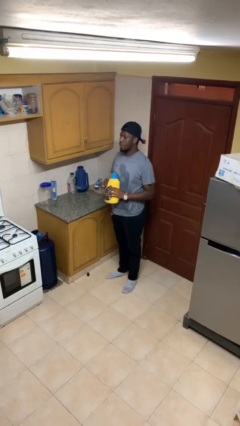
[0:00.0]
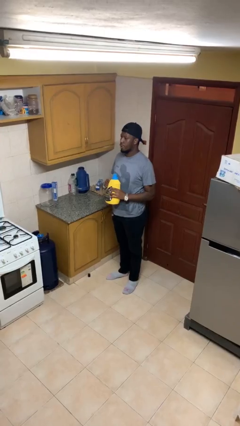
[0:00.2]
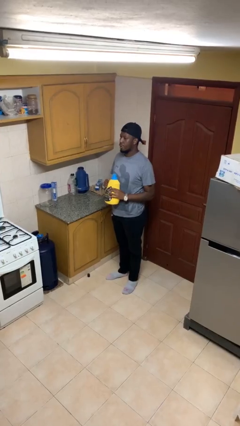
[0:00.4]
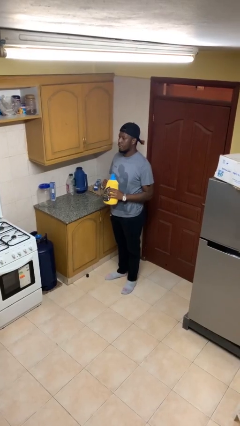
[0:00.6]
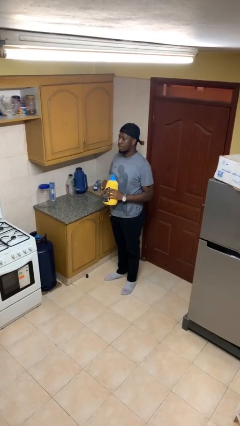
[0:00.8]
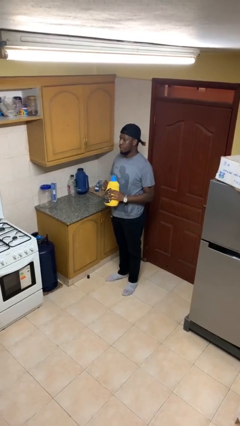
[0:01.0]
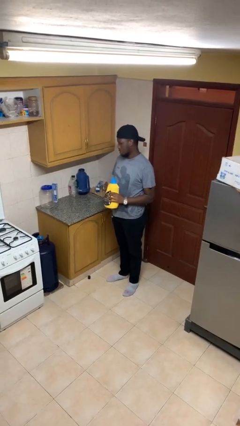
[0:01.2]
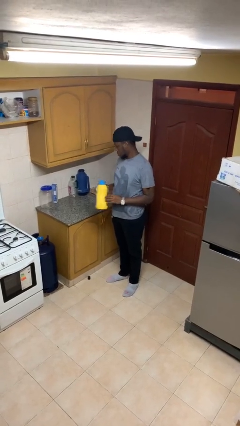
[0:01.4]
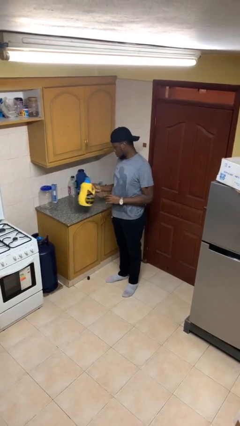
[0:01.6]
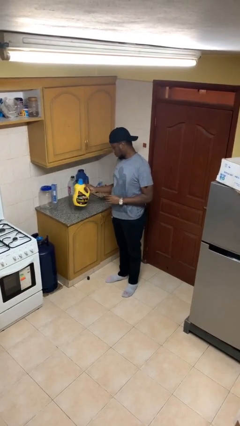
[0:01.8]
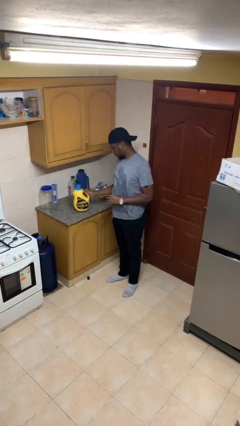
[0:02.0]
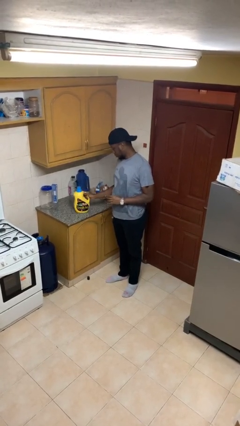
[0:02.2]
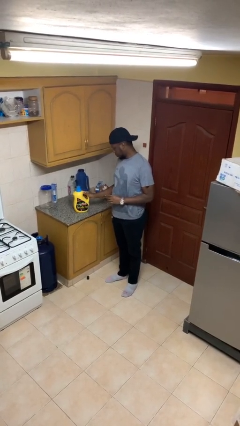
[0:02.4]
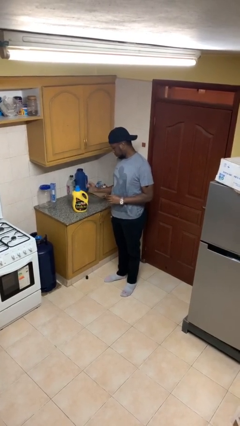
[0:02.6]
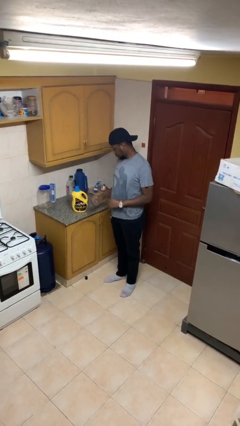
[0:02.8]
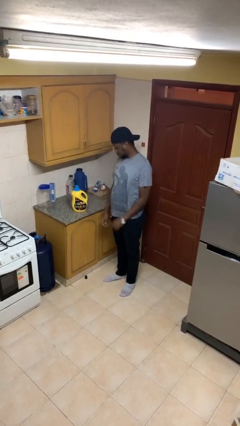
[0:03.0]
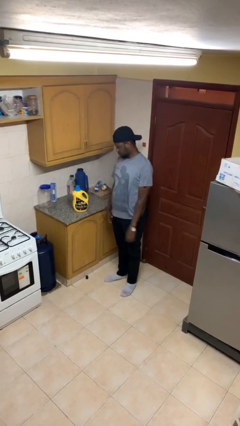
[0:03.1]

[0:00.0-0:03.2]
person puts down object on table

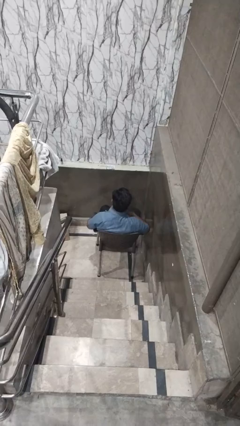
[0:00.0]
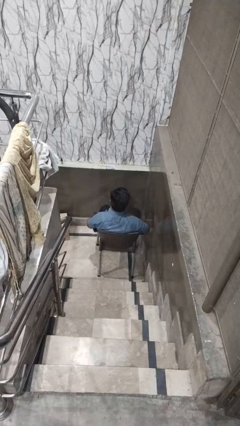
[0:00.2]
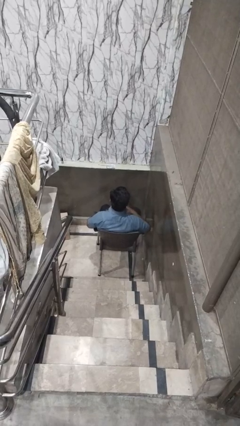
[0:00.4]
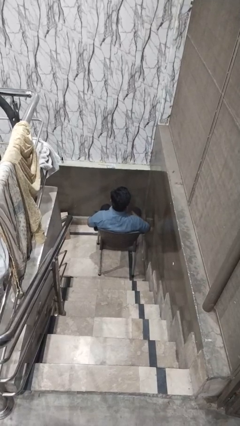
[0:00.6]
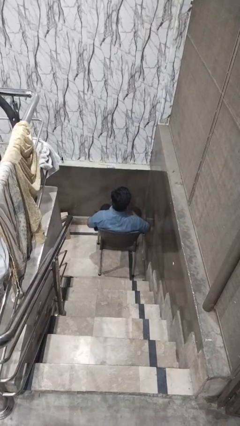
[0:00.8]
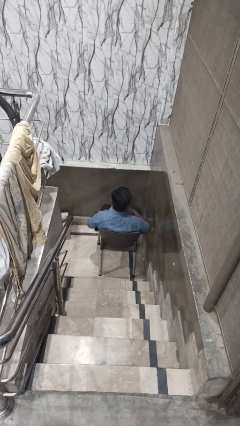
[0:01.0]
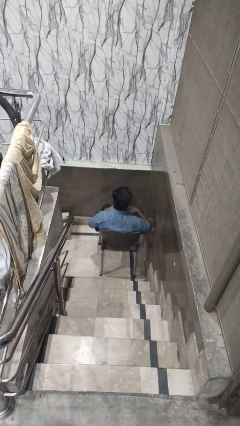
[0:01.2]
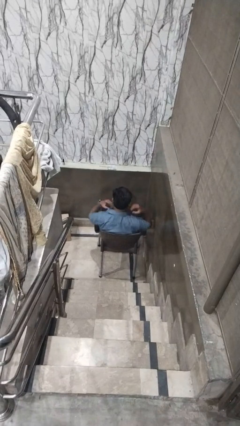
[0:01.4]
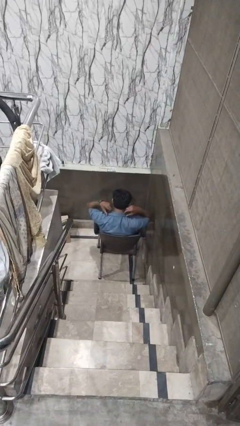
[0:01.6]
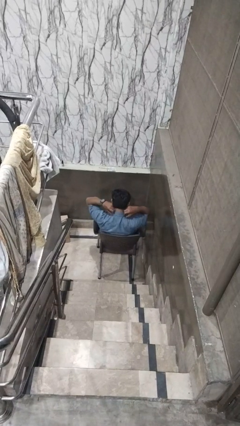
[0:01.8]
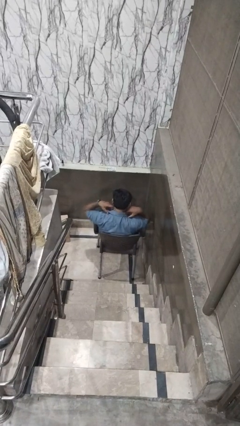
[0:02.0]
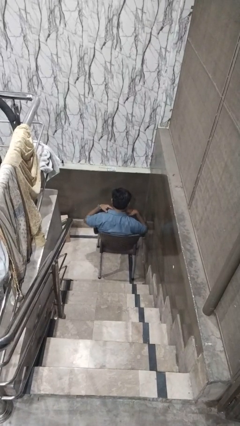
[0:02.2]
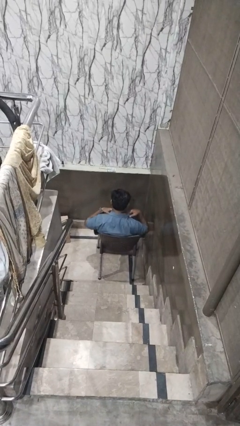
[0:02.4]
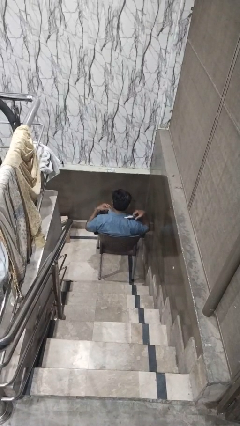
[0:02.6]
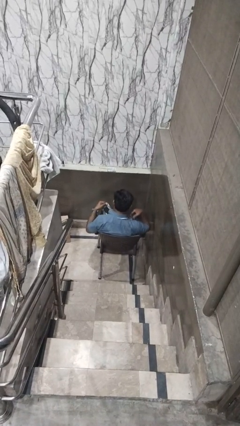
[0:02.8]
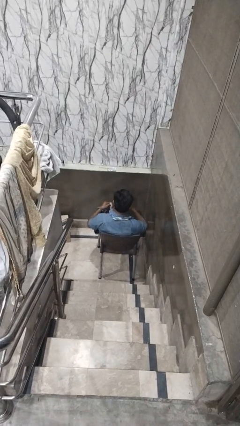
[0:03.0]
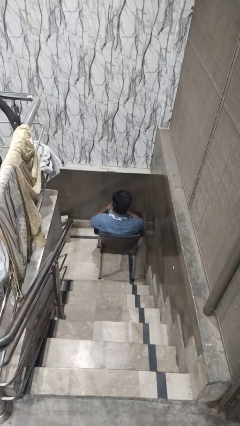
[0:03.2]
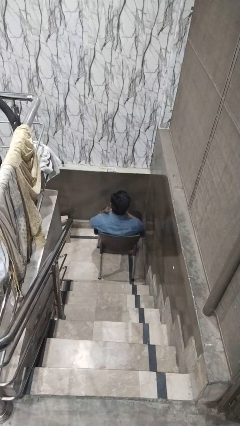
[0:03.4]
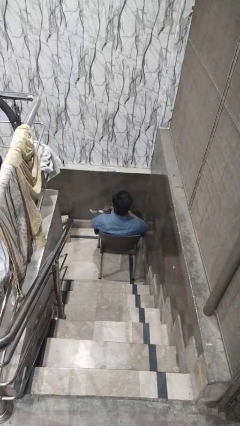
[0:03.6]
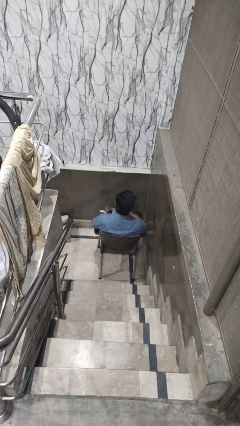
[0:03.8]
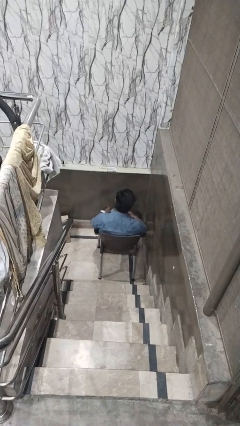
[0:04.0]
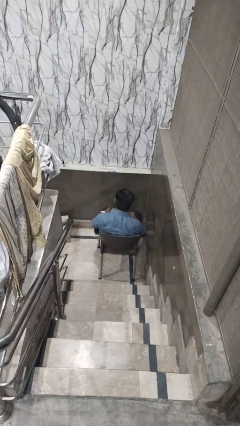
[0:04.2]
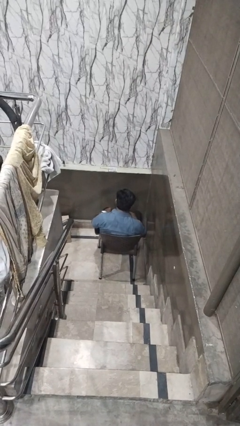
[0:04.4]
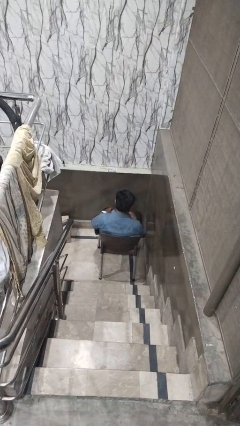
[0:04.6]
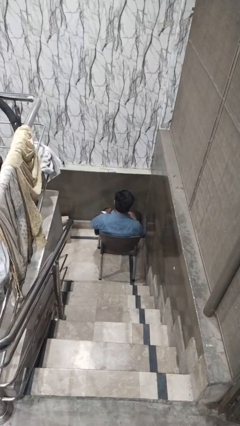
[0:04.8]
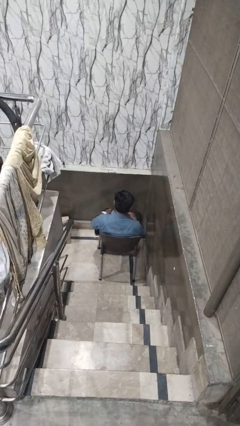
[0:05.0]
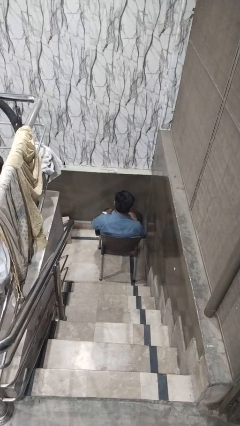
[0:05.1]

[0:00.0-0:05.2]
person takes off necktie

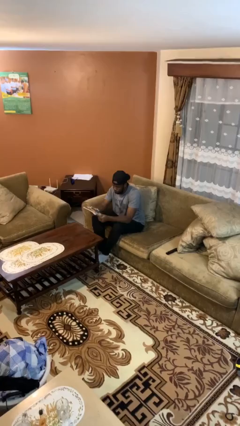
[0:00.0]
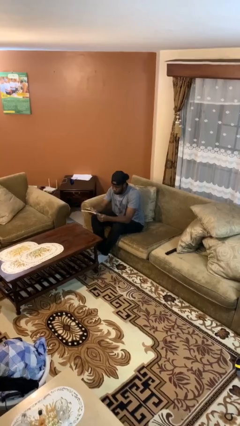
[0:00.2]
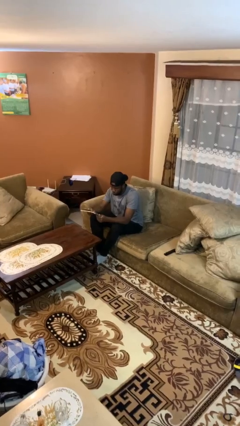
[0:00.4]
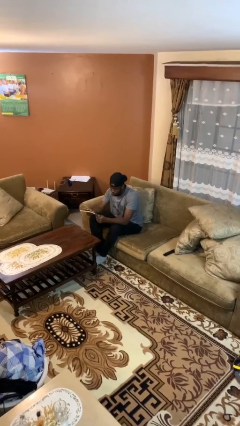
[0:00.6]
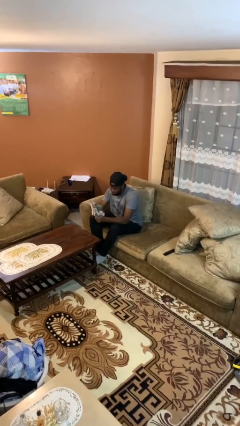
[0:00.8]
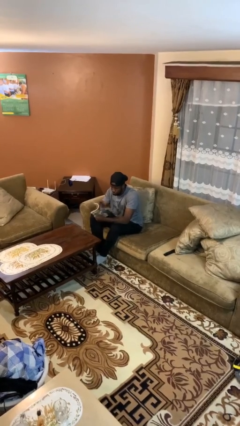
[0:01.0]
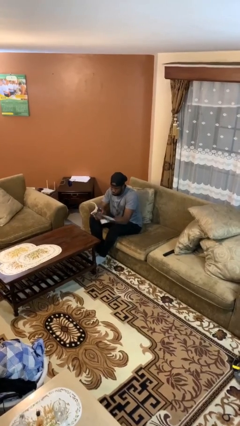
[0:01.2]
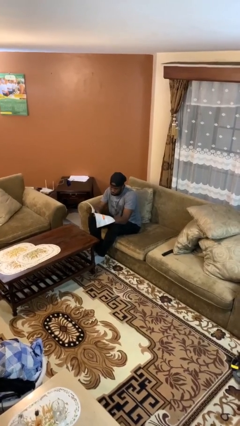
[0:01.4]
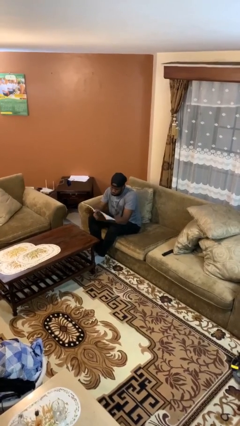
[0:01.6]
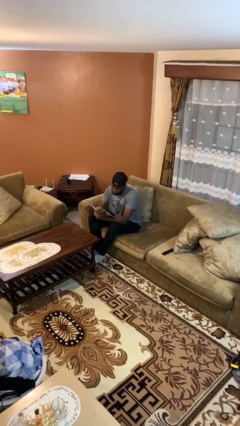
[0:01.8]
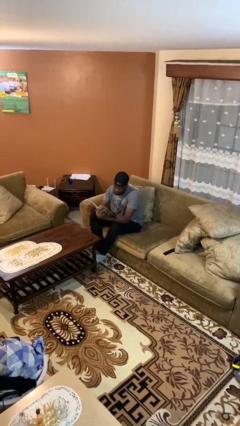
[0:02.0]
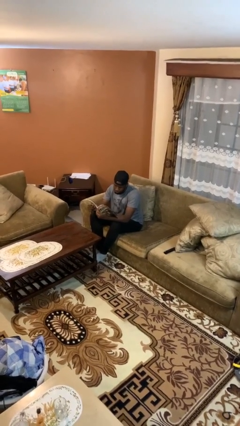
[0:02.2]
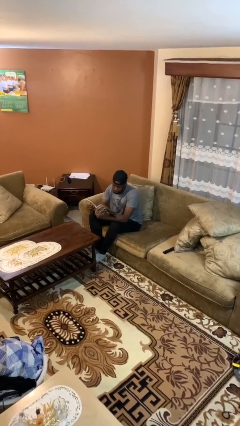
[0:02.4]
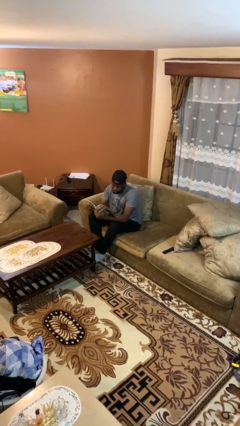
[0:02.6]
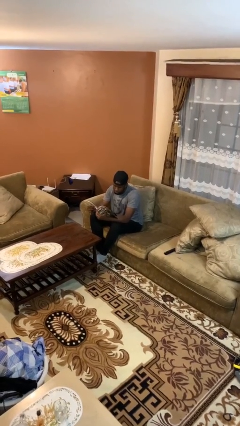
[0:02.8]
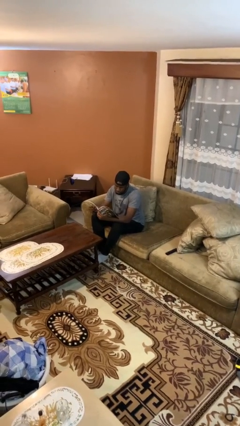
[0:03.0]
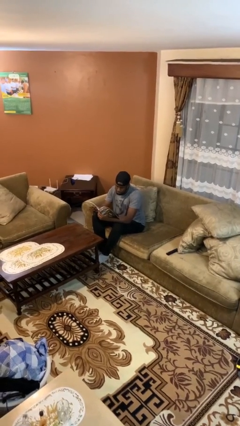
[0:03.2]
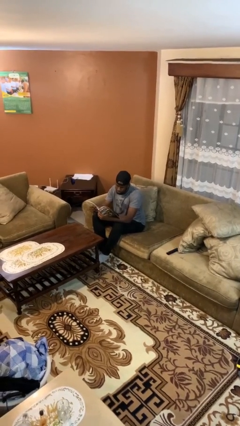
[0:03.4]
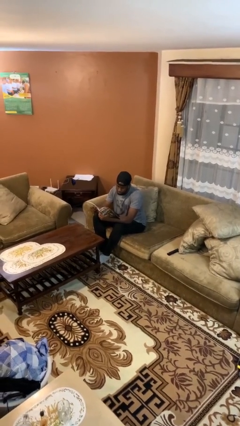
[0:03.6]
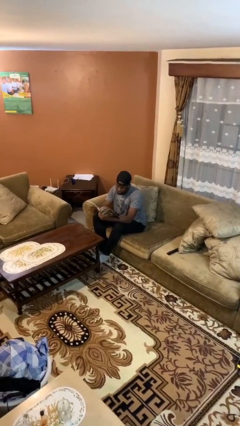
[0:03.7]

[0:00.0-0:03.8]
person reads document

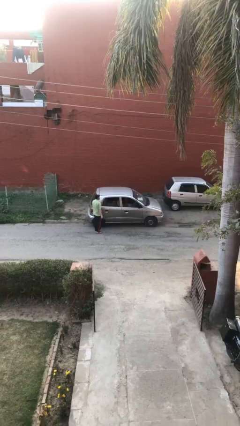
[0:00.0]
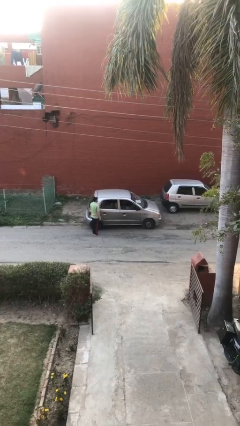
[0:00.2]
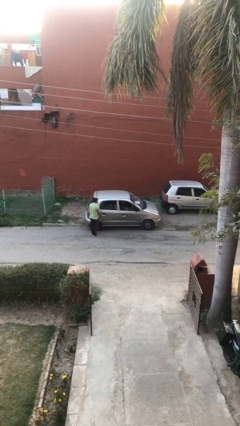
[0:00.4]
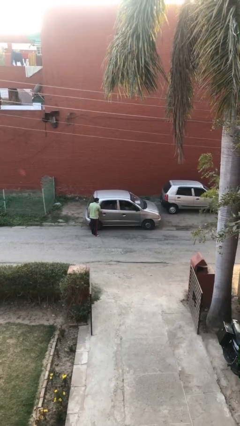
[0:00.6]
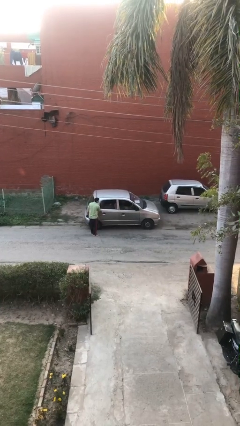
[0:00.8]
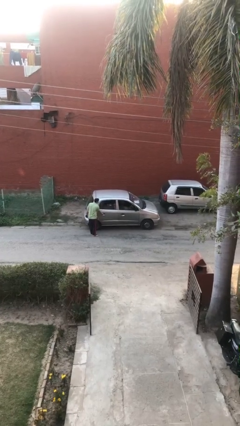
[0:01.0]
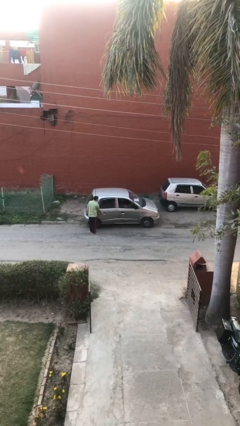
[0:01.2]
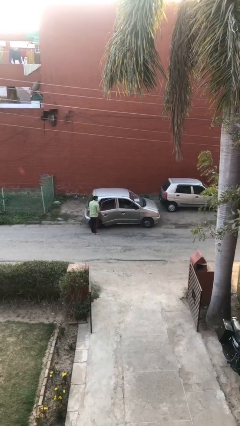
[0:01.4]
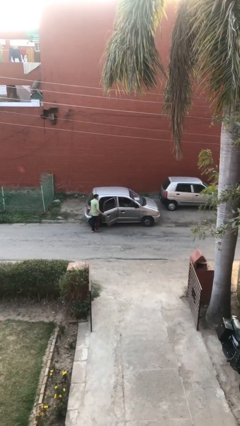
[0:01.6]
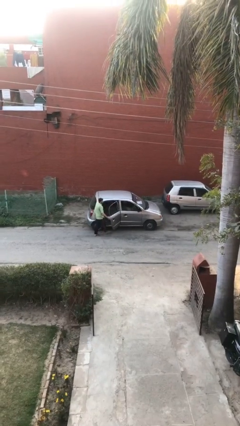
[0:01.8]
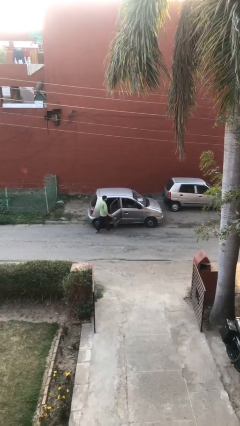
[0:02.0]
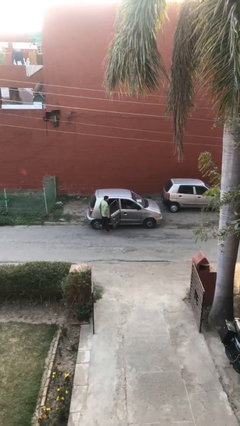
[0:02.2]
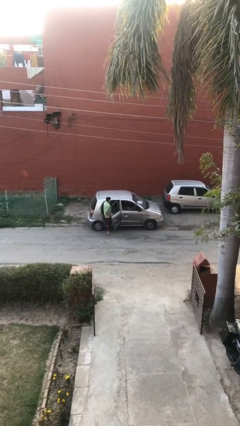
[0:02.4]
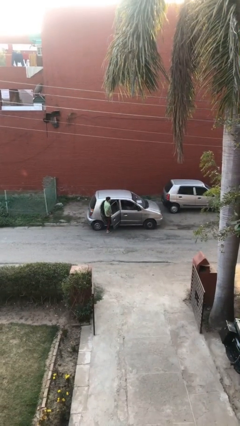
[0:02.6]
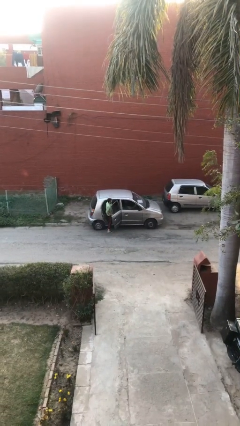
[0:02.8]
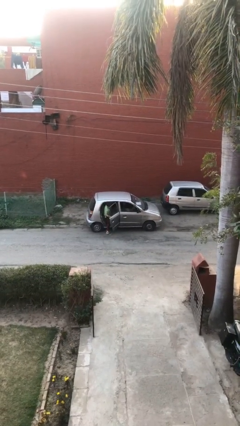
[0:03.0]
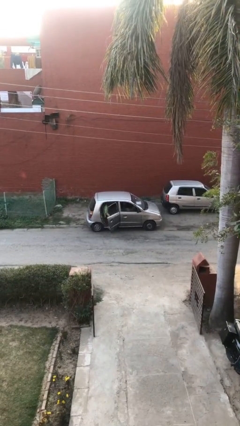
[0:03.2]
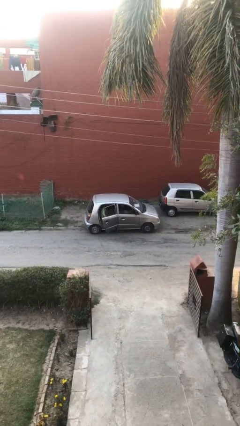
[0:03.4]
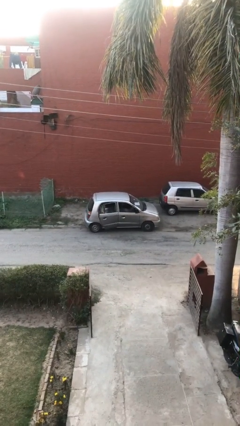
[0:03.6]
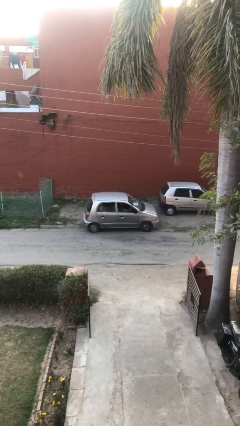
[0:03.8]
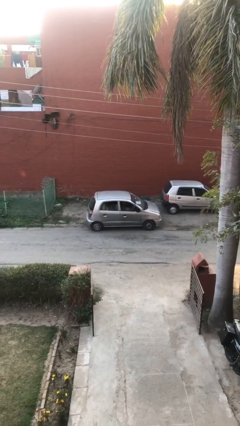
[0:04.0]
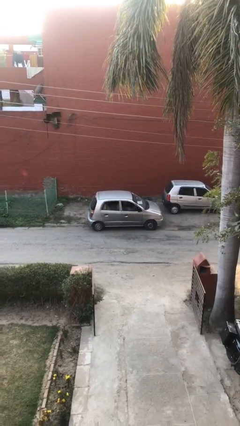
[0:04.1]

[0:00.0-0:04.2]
car picks up person

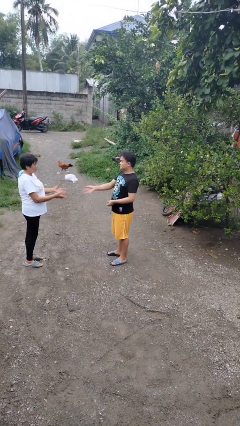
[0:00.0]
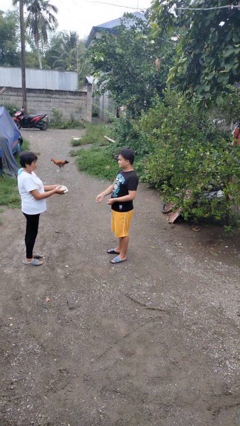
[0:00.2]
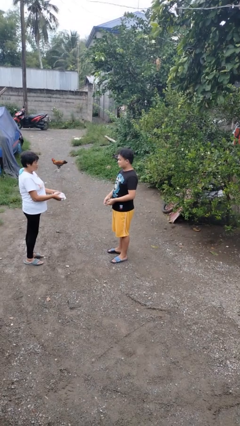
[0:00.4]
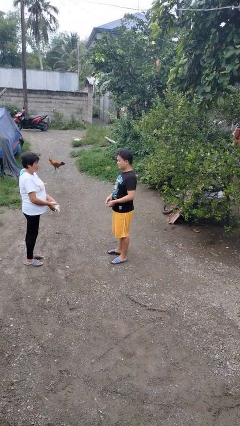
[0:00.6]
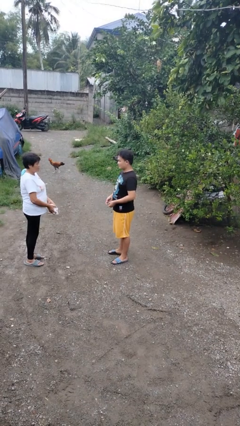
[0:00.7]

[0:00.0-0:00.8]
person throws object to person

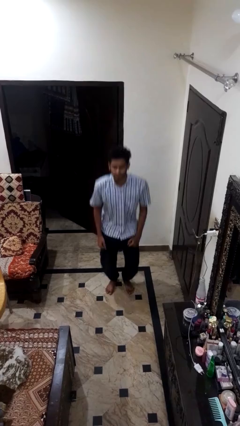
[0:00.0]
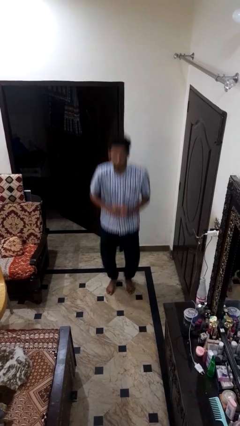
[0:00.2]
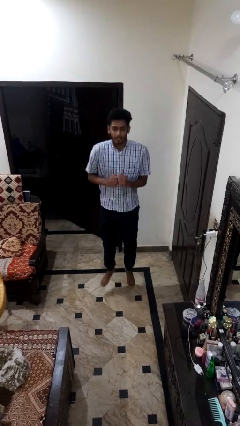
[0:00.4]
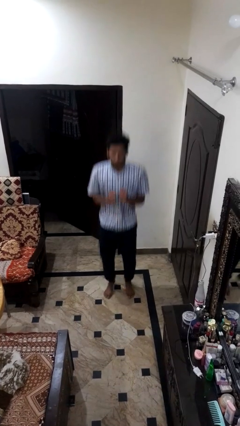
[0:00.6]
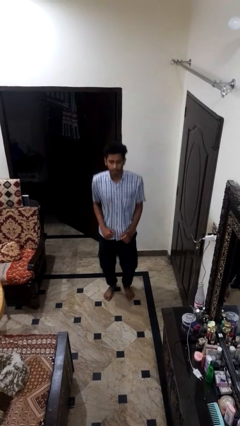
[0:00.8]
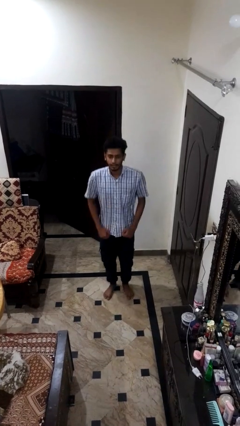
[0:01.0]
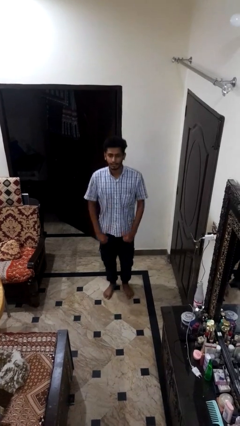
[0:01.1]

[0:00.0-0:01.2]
person jumps
